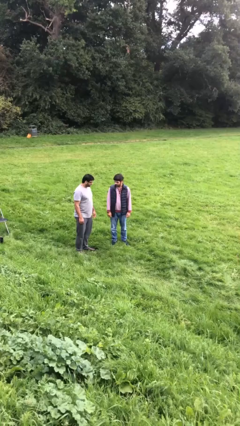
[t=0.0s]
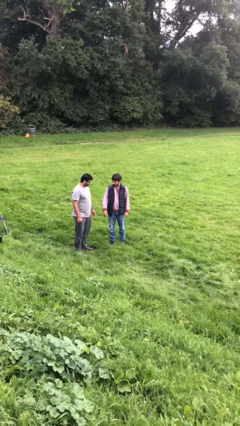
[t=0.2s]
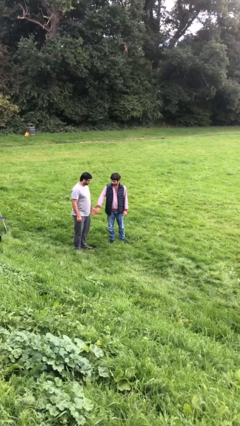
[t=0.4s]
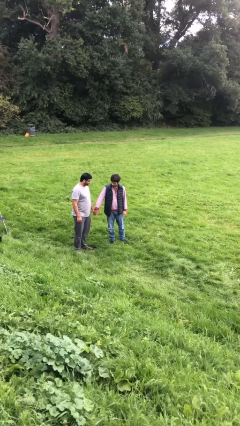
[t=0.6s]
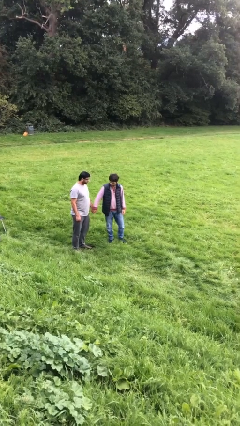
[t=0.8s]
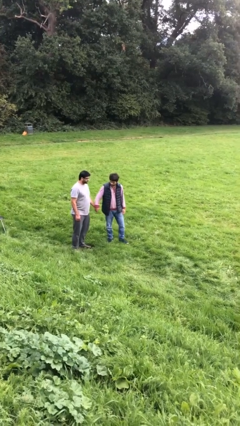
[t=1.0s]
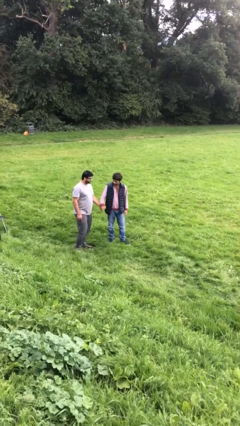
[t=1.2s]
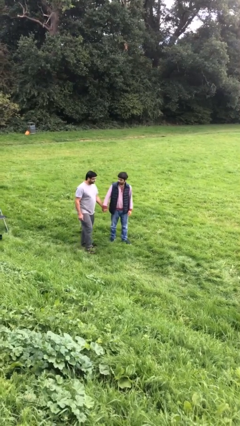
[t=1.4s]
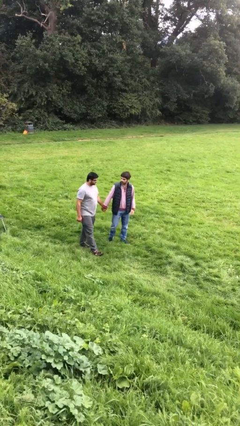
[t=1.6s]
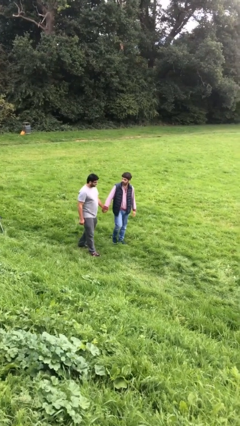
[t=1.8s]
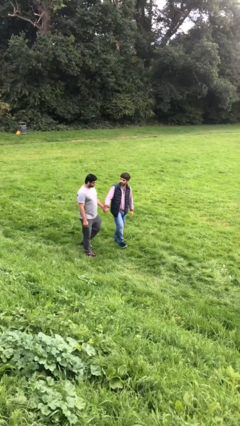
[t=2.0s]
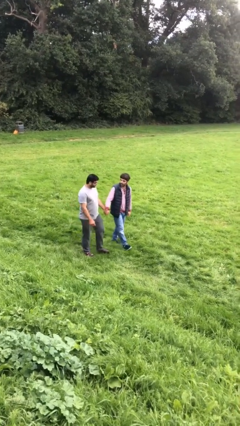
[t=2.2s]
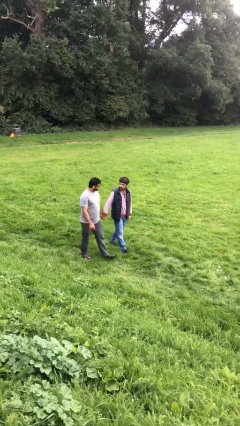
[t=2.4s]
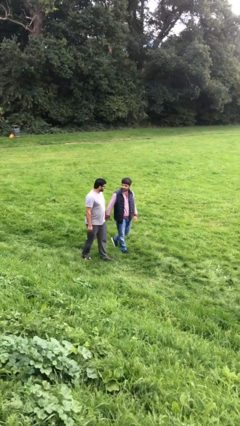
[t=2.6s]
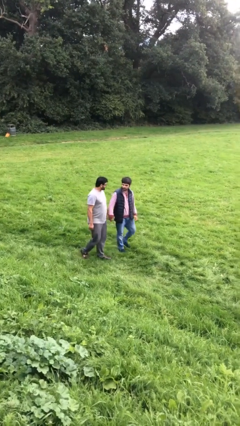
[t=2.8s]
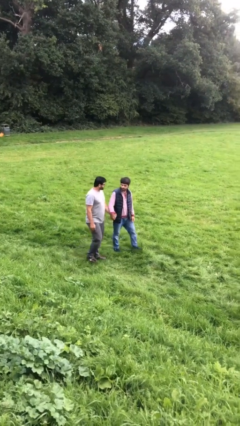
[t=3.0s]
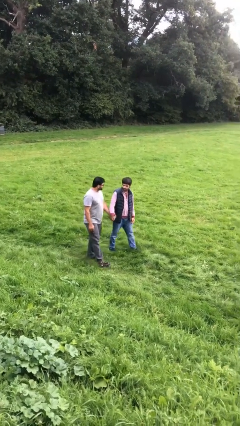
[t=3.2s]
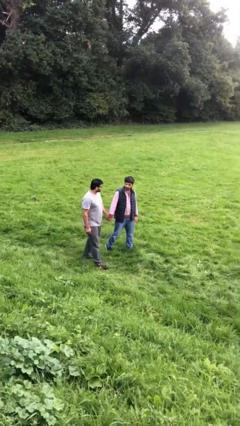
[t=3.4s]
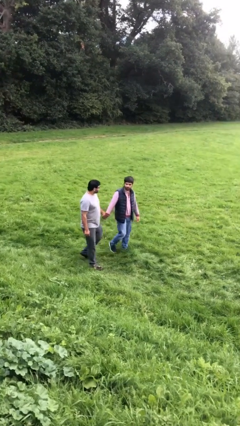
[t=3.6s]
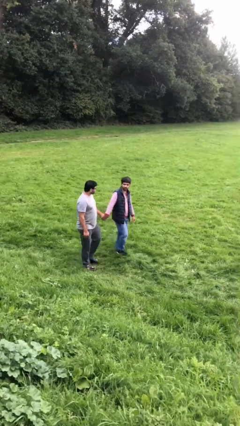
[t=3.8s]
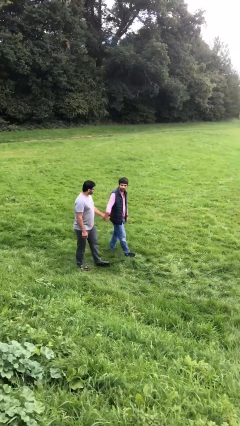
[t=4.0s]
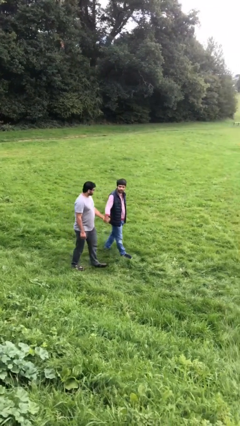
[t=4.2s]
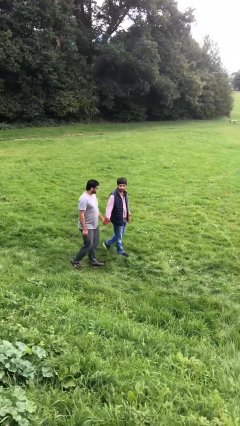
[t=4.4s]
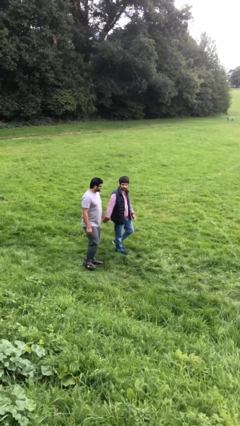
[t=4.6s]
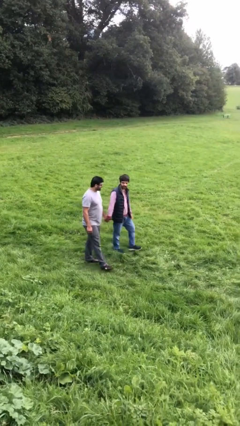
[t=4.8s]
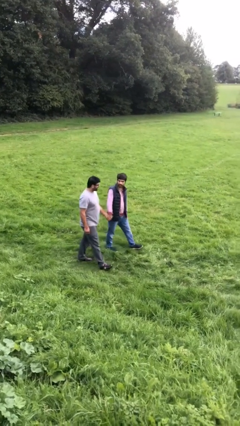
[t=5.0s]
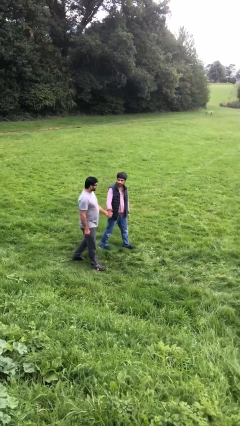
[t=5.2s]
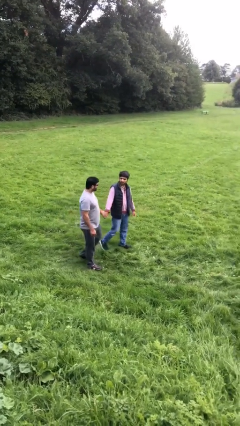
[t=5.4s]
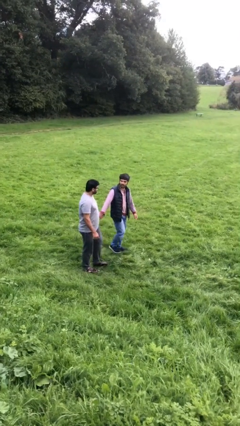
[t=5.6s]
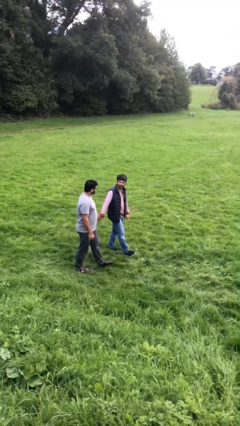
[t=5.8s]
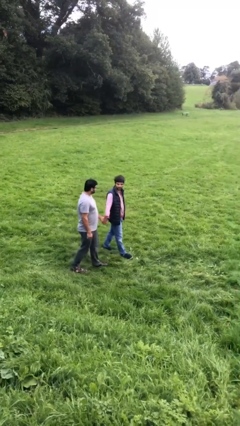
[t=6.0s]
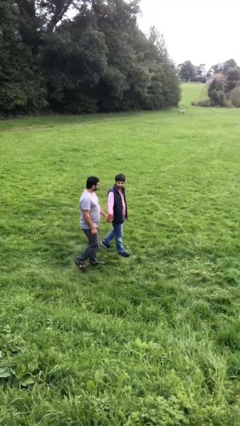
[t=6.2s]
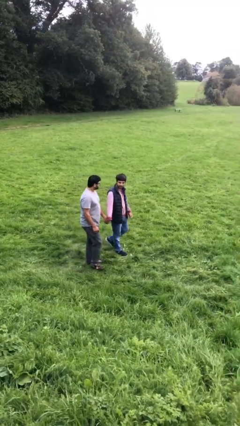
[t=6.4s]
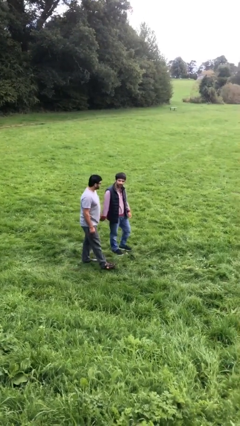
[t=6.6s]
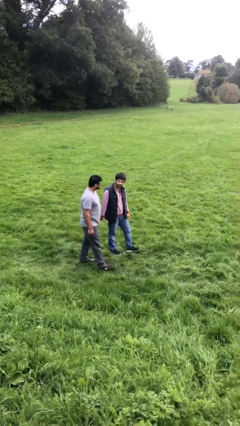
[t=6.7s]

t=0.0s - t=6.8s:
person holds hand

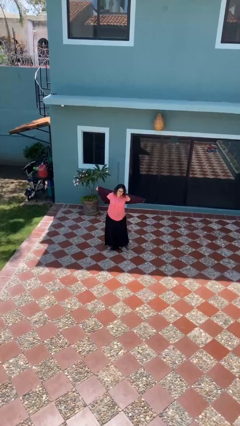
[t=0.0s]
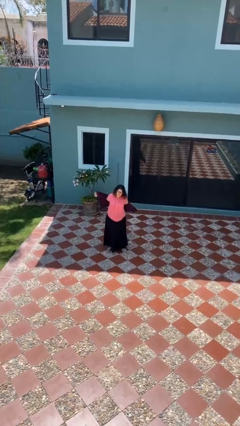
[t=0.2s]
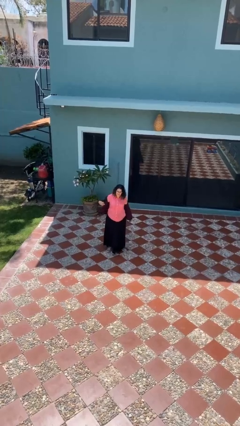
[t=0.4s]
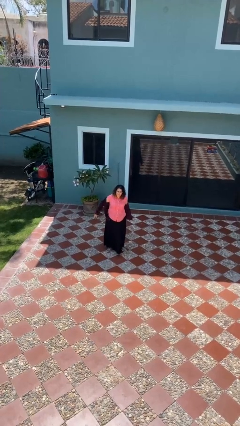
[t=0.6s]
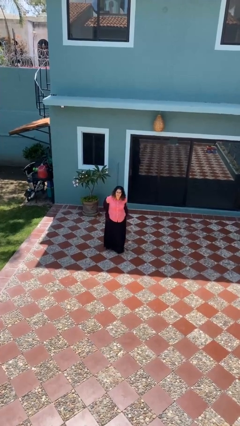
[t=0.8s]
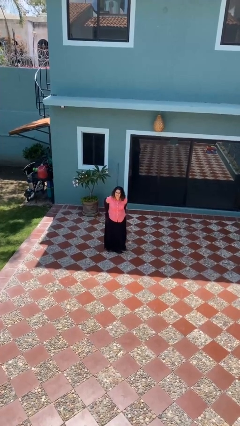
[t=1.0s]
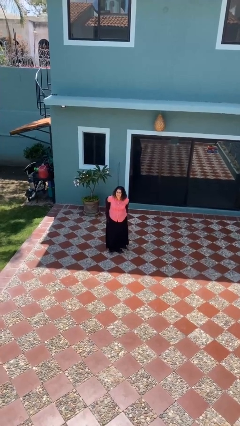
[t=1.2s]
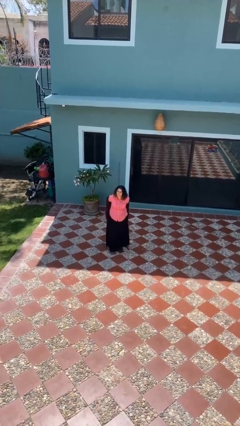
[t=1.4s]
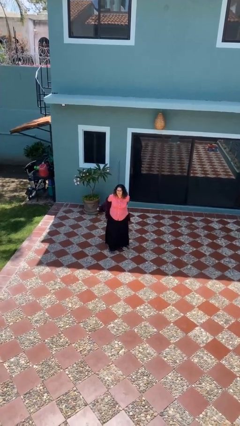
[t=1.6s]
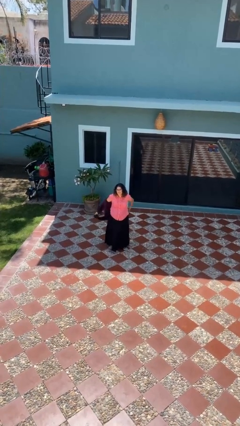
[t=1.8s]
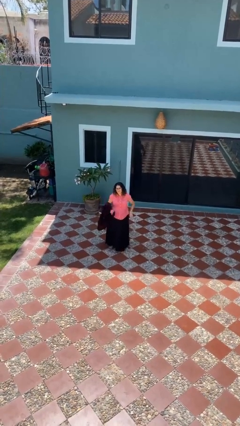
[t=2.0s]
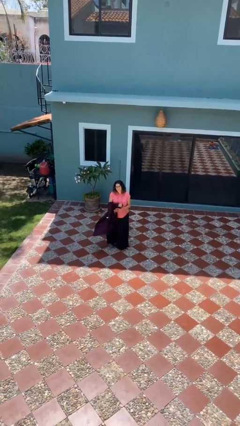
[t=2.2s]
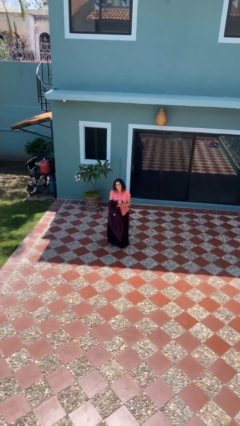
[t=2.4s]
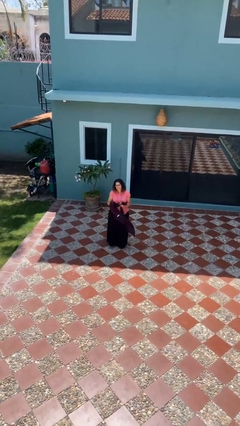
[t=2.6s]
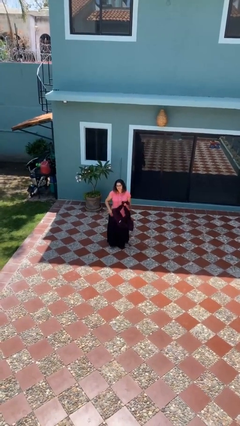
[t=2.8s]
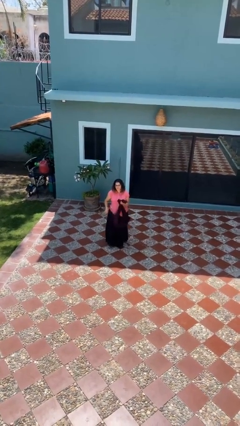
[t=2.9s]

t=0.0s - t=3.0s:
person takes off jacket

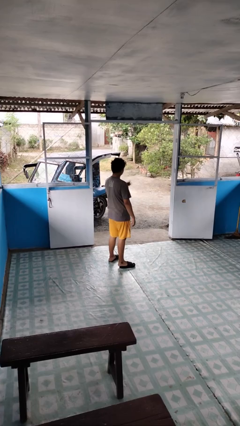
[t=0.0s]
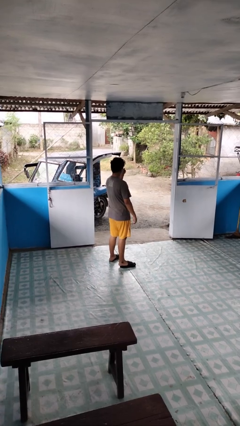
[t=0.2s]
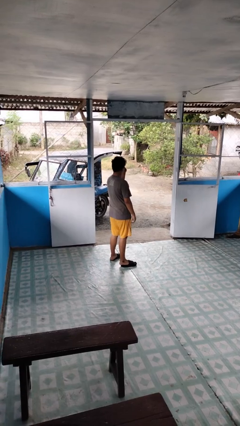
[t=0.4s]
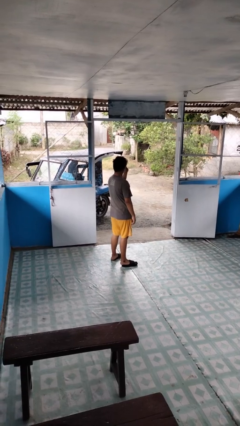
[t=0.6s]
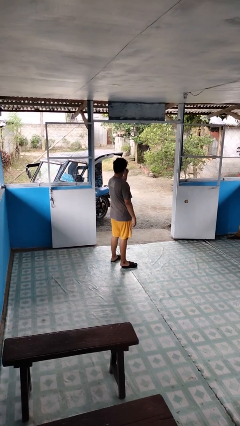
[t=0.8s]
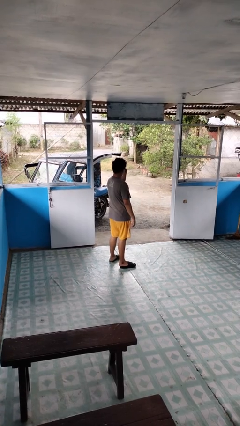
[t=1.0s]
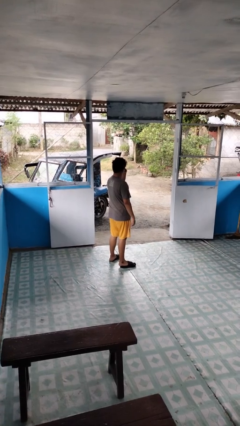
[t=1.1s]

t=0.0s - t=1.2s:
person gestures watch closely

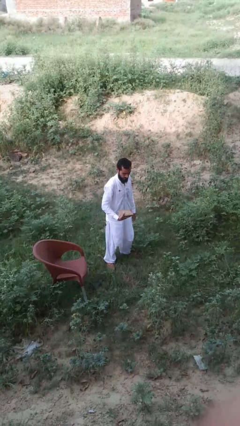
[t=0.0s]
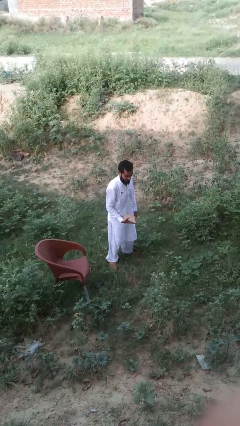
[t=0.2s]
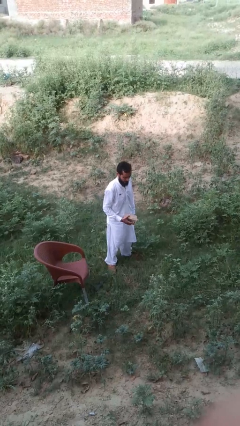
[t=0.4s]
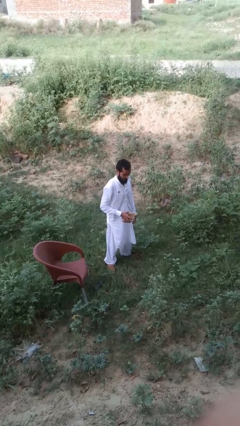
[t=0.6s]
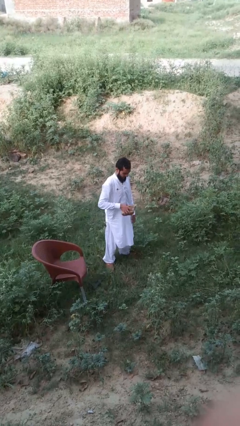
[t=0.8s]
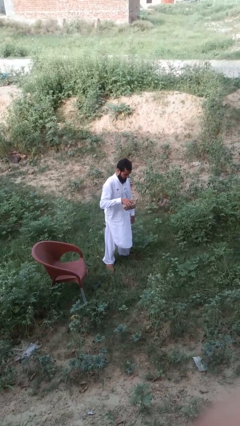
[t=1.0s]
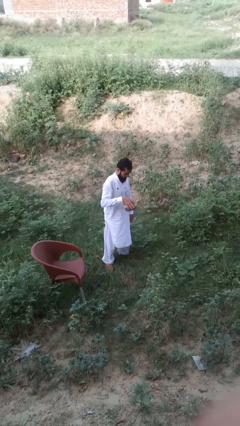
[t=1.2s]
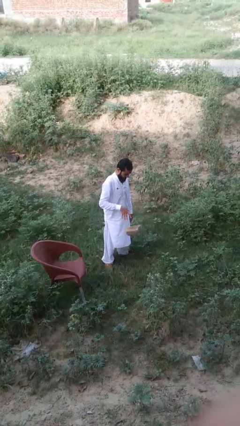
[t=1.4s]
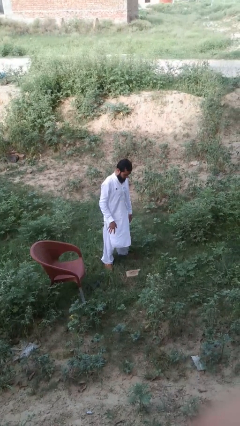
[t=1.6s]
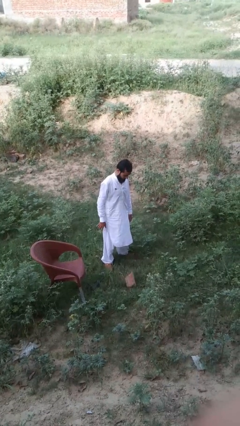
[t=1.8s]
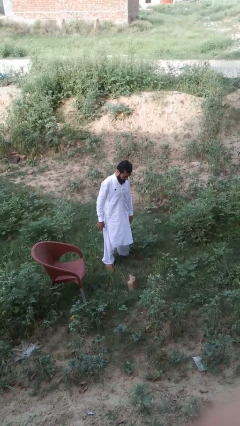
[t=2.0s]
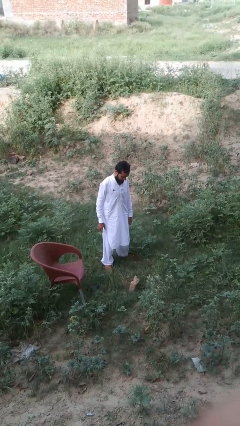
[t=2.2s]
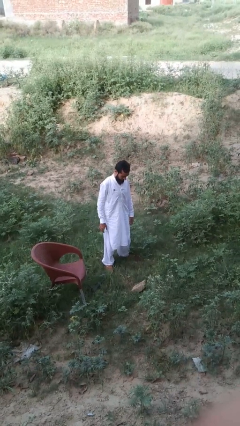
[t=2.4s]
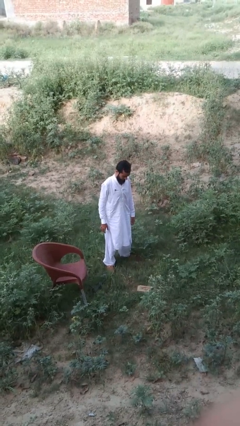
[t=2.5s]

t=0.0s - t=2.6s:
person throws object to ground

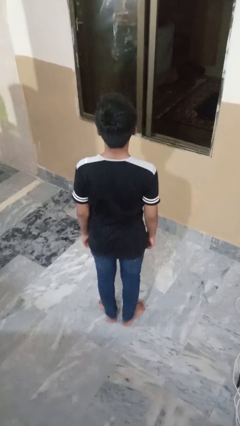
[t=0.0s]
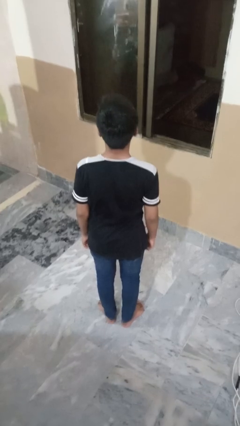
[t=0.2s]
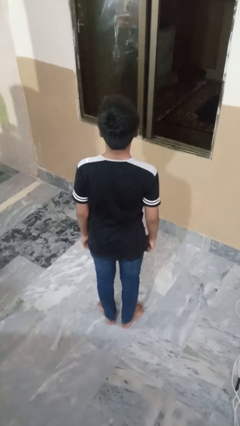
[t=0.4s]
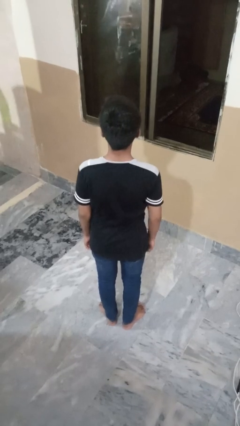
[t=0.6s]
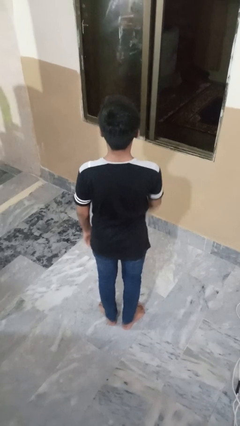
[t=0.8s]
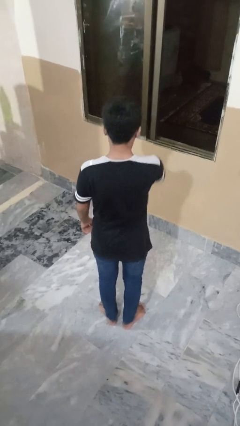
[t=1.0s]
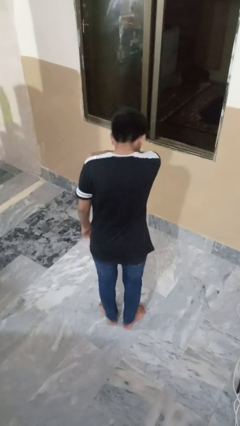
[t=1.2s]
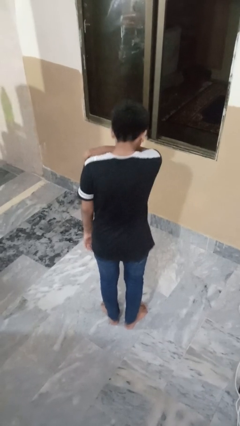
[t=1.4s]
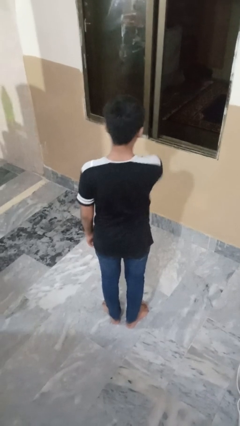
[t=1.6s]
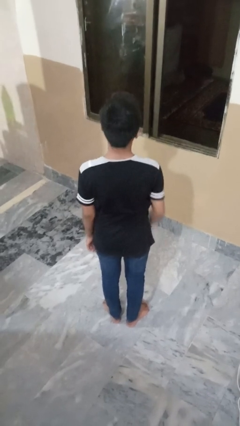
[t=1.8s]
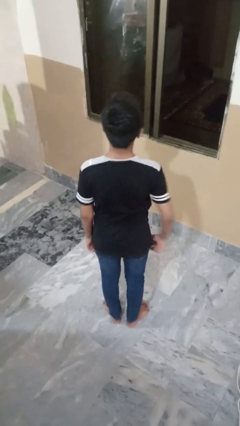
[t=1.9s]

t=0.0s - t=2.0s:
person sneezes into arm

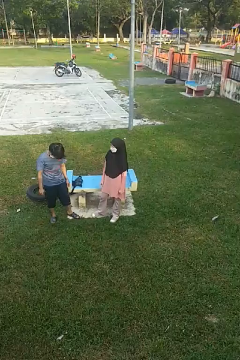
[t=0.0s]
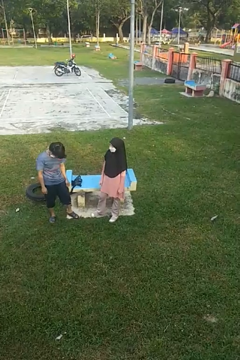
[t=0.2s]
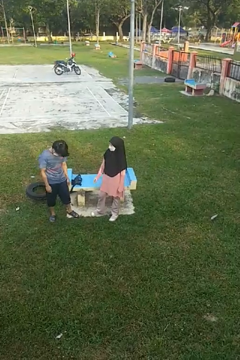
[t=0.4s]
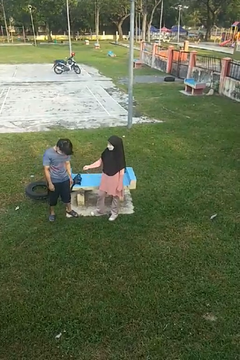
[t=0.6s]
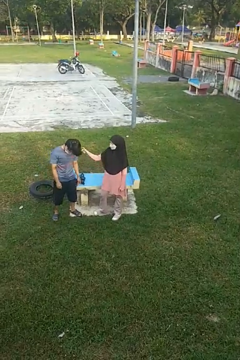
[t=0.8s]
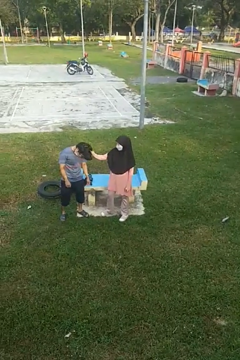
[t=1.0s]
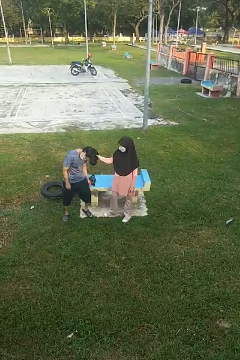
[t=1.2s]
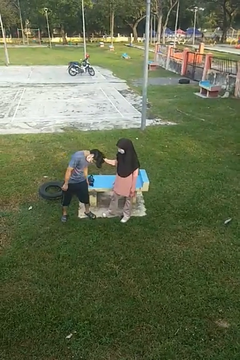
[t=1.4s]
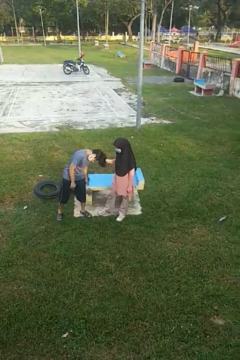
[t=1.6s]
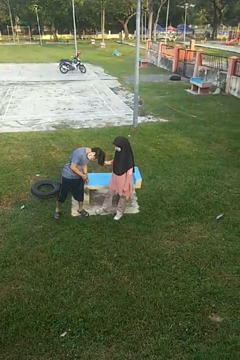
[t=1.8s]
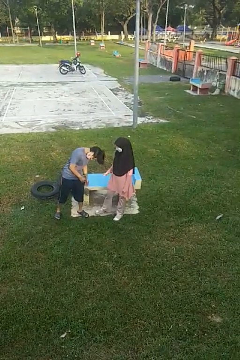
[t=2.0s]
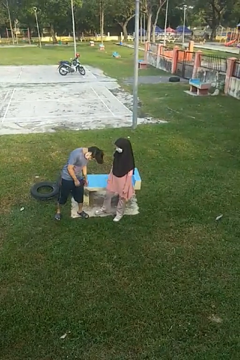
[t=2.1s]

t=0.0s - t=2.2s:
person grabs person by hair
